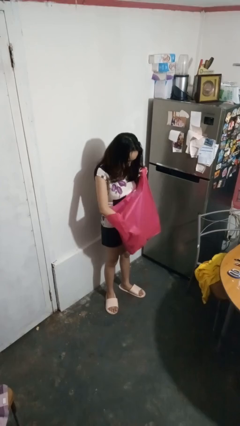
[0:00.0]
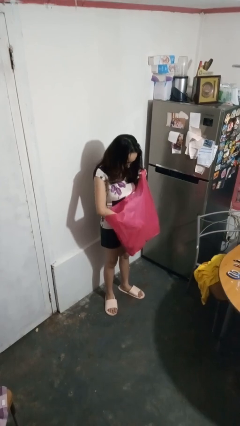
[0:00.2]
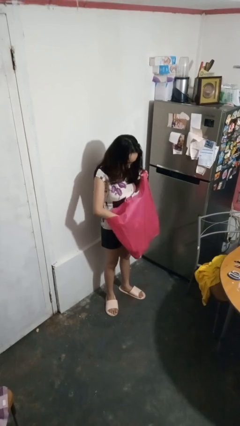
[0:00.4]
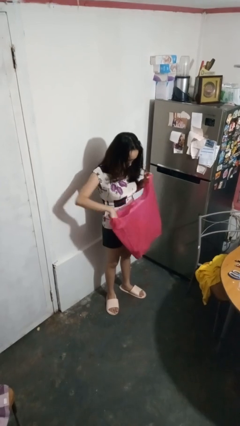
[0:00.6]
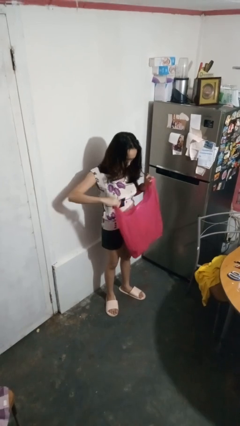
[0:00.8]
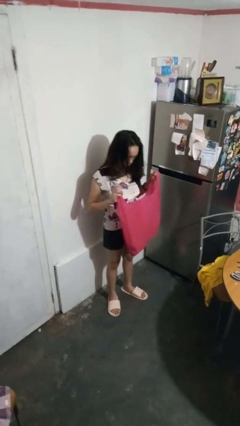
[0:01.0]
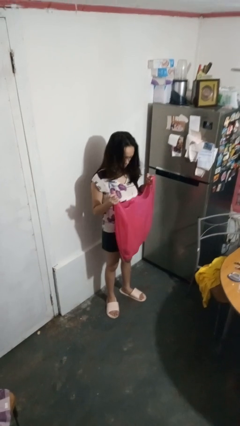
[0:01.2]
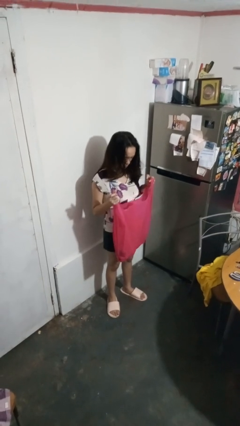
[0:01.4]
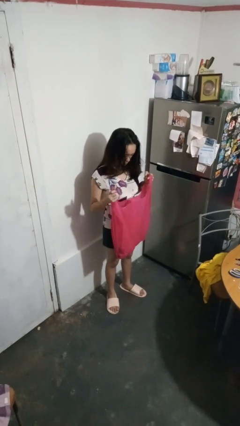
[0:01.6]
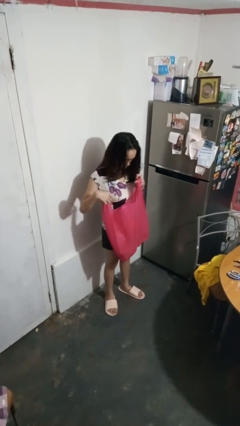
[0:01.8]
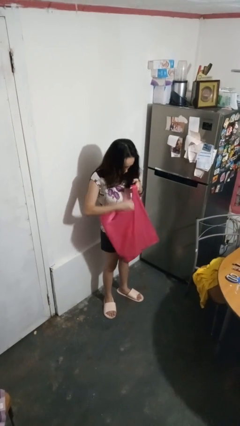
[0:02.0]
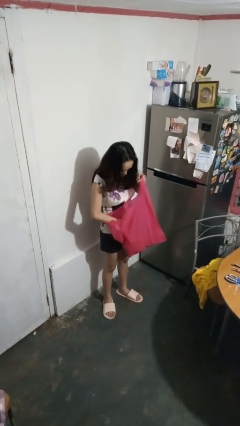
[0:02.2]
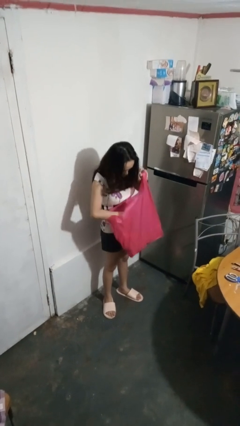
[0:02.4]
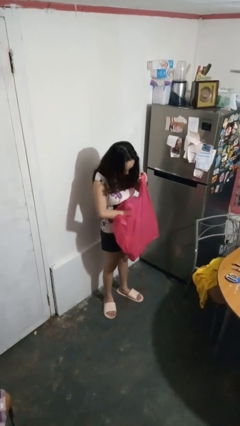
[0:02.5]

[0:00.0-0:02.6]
person searches in box

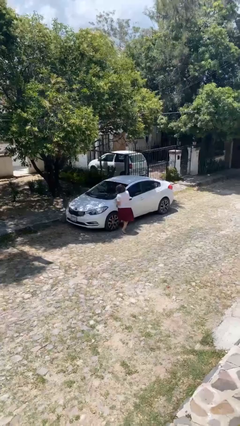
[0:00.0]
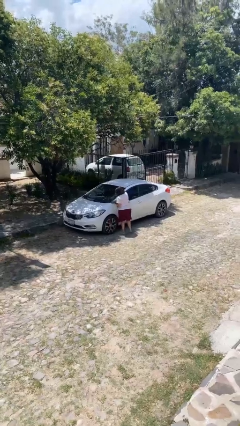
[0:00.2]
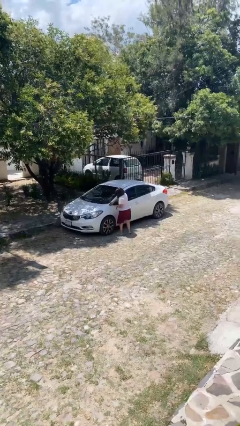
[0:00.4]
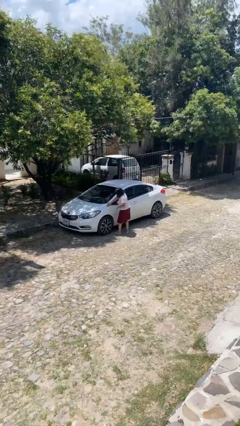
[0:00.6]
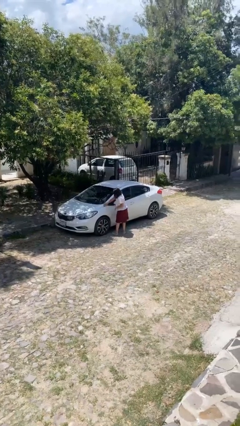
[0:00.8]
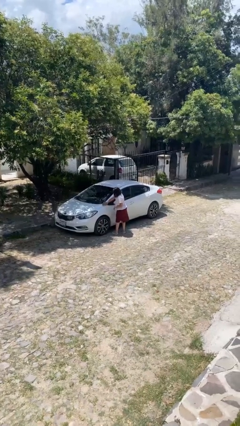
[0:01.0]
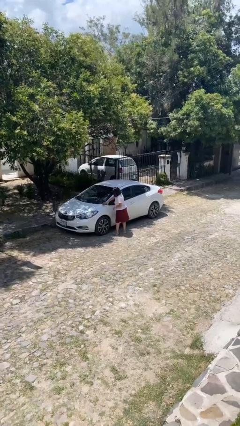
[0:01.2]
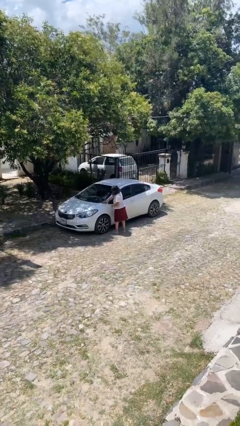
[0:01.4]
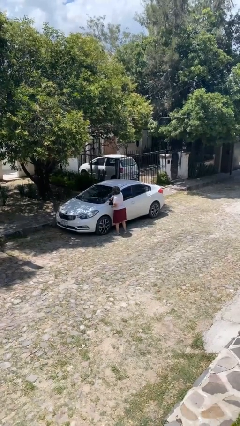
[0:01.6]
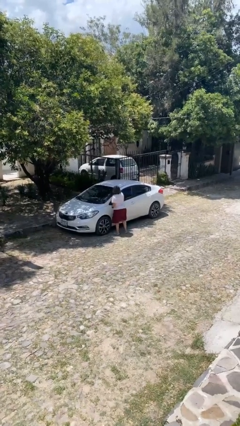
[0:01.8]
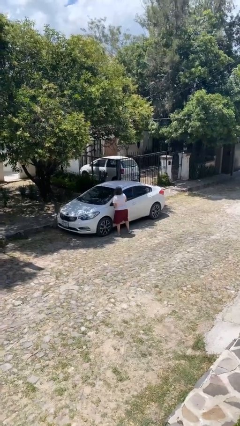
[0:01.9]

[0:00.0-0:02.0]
person polishes car with rag

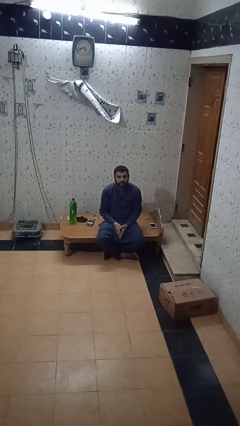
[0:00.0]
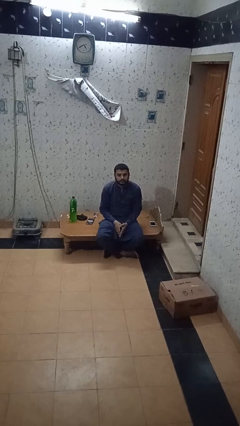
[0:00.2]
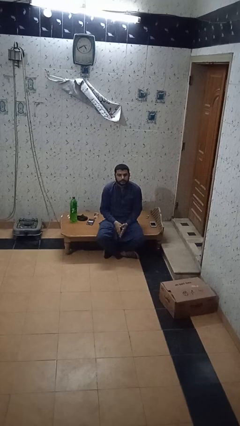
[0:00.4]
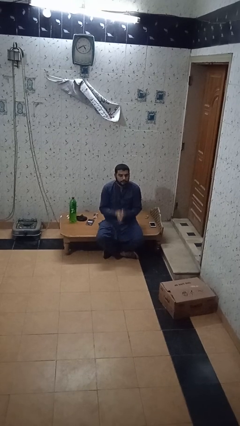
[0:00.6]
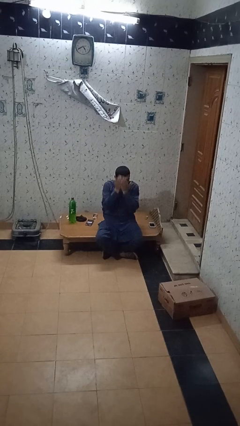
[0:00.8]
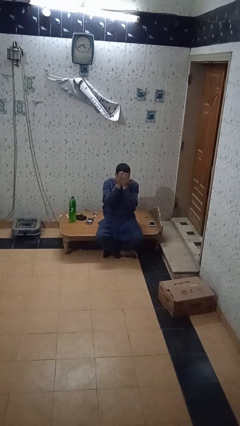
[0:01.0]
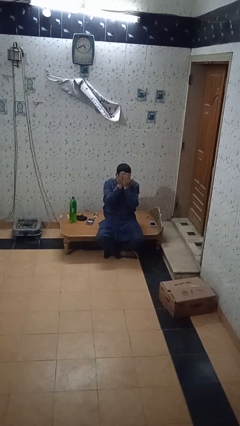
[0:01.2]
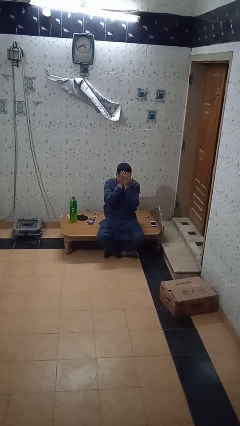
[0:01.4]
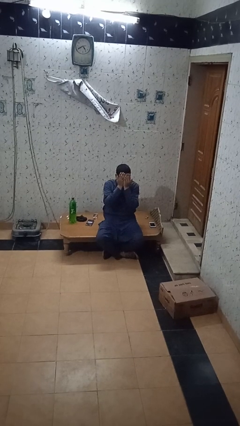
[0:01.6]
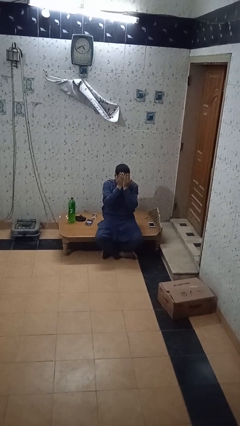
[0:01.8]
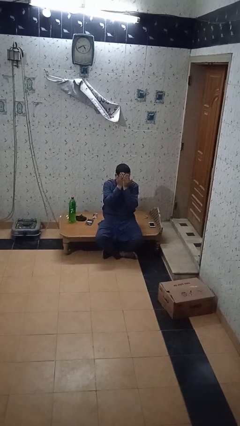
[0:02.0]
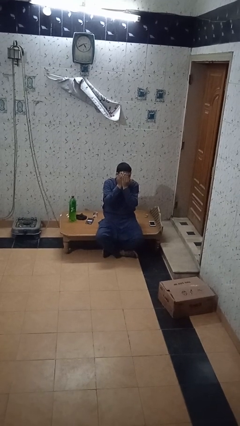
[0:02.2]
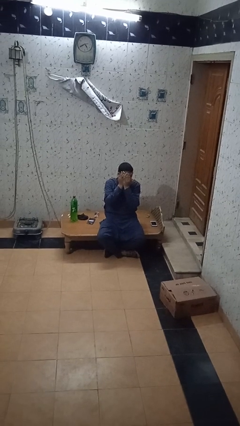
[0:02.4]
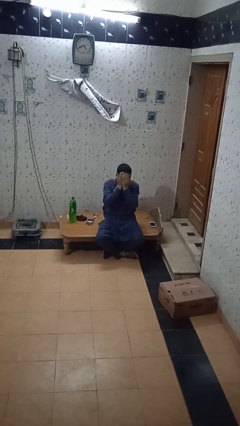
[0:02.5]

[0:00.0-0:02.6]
person covers face with hands

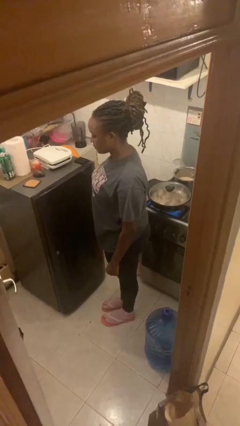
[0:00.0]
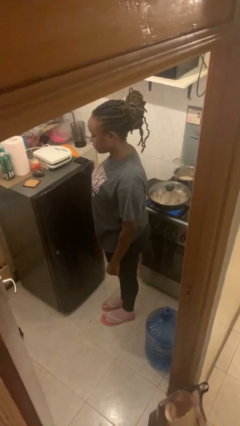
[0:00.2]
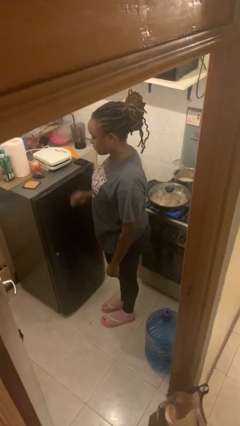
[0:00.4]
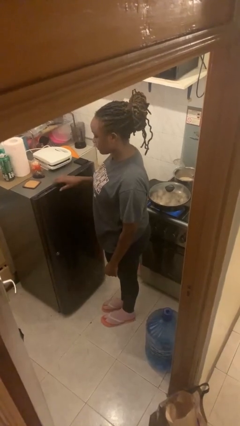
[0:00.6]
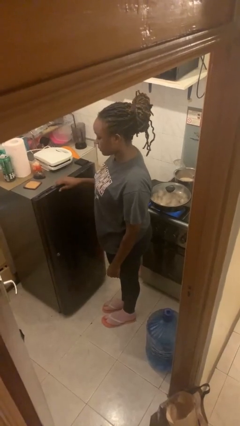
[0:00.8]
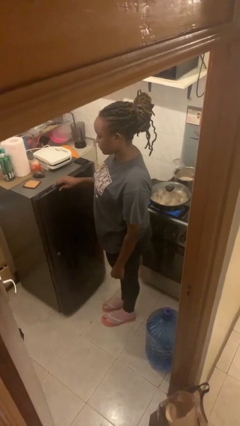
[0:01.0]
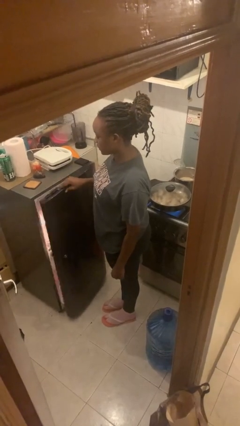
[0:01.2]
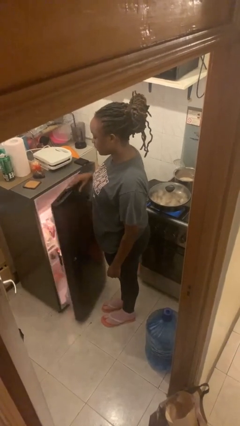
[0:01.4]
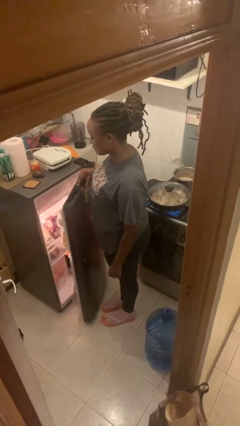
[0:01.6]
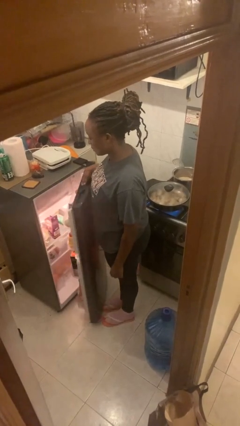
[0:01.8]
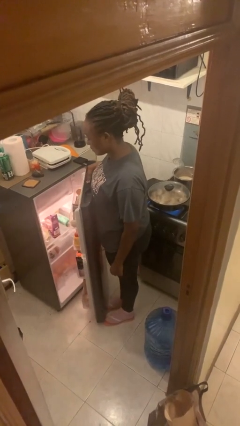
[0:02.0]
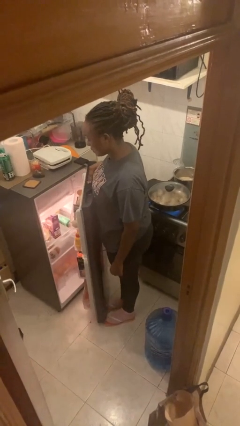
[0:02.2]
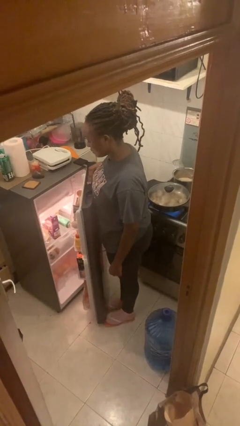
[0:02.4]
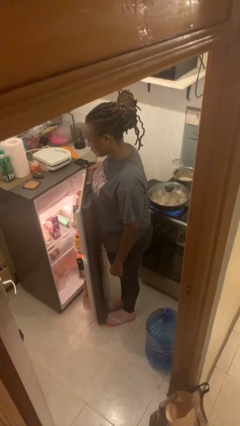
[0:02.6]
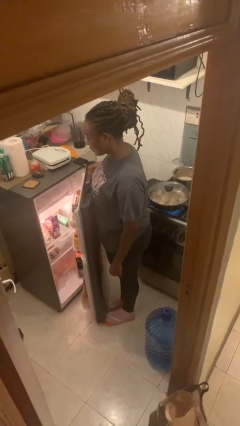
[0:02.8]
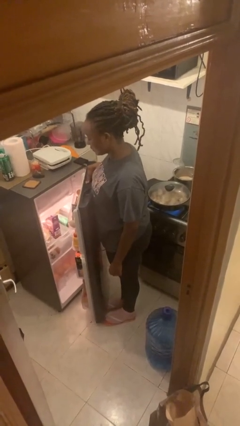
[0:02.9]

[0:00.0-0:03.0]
person opens refrigerator

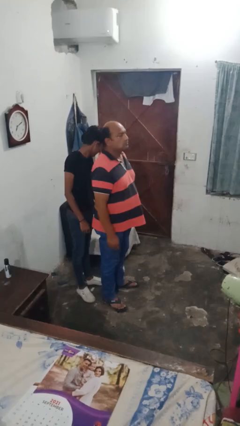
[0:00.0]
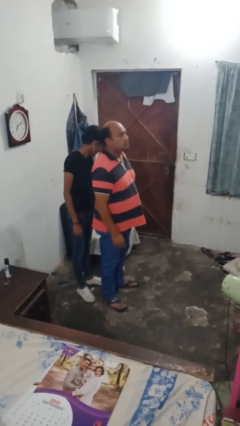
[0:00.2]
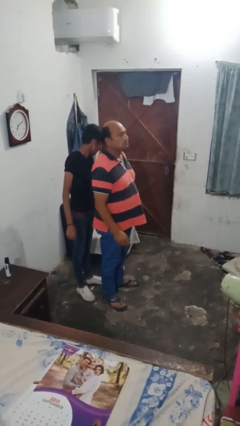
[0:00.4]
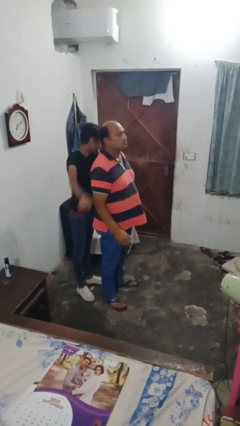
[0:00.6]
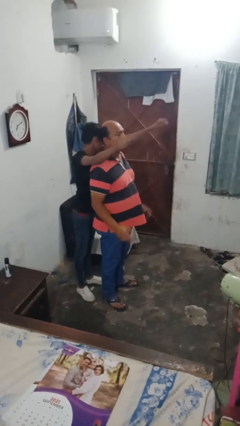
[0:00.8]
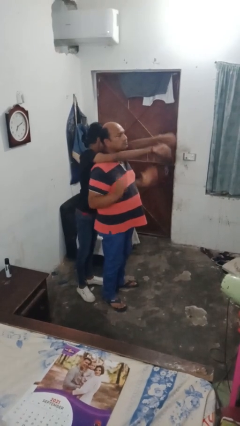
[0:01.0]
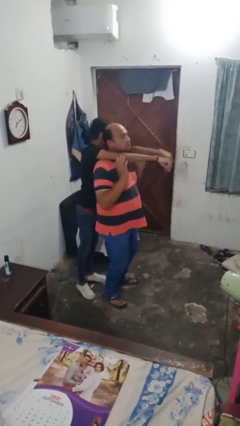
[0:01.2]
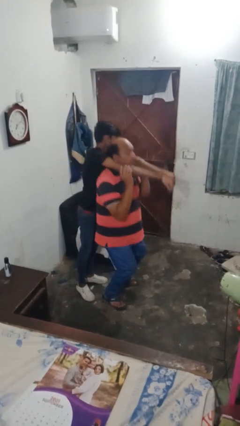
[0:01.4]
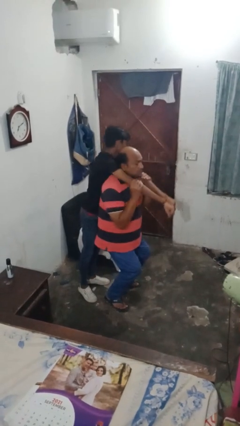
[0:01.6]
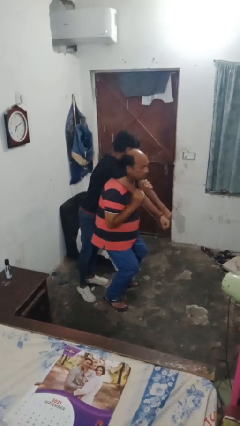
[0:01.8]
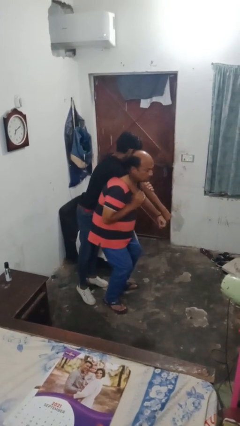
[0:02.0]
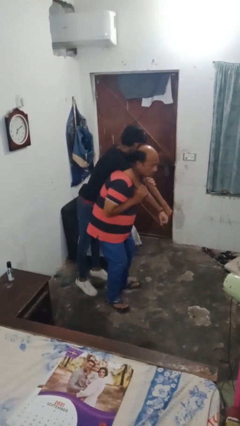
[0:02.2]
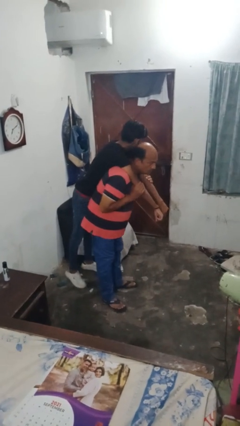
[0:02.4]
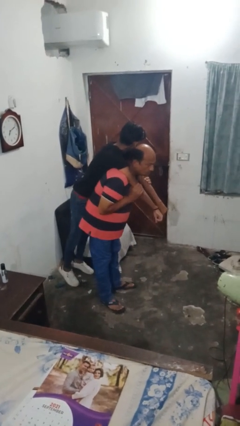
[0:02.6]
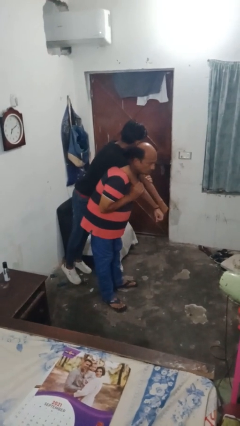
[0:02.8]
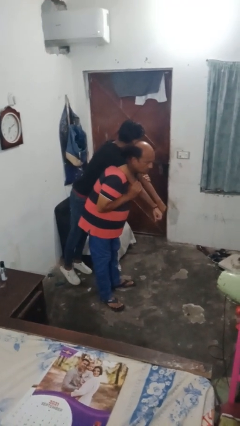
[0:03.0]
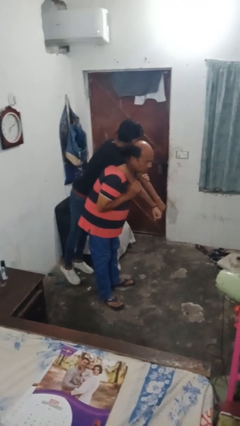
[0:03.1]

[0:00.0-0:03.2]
person carries person on shoulders

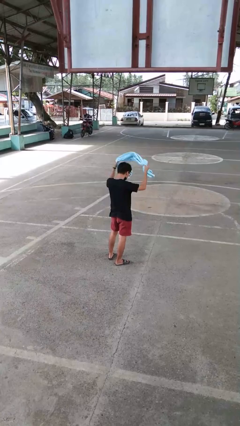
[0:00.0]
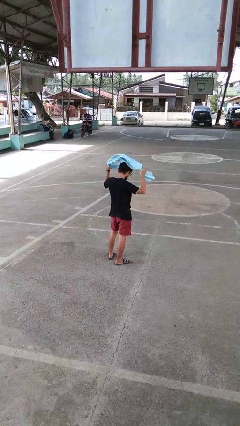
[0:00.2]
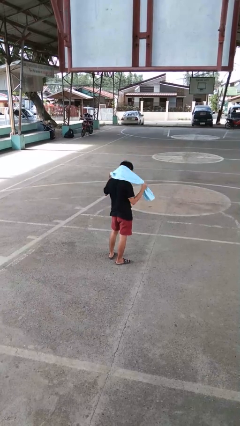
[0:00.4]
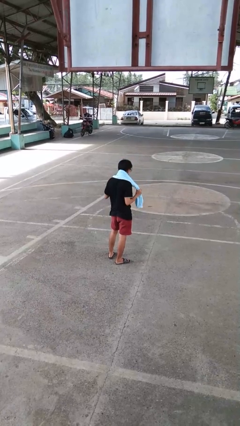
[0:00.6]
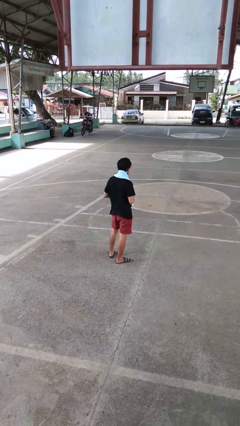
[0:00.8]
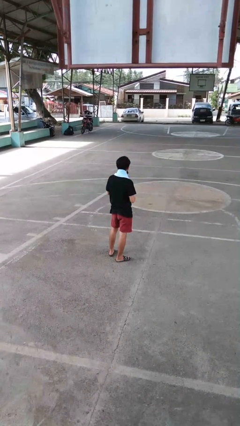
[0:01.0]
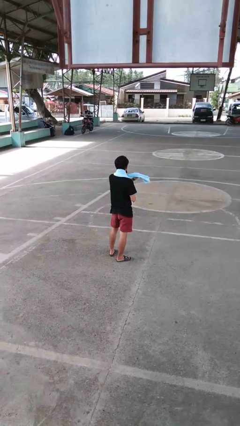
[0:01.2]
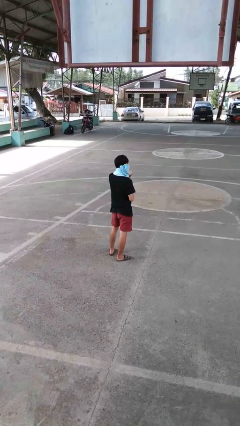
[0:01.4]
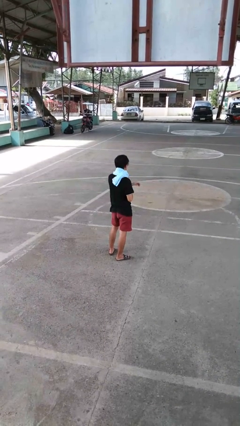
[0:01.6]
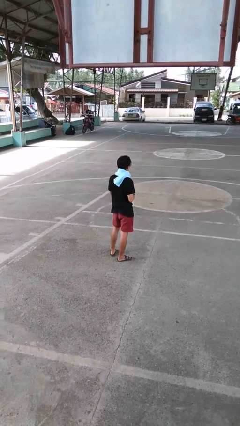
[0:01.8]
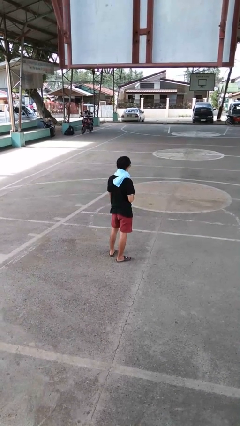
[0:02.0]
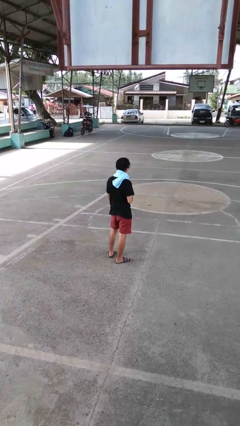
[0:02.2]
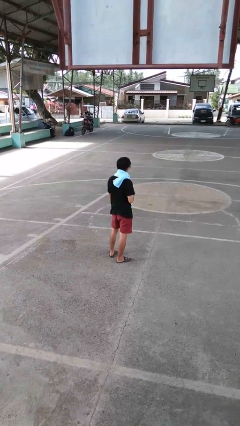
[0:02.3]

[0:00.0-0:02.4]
person puts on scarf

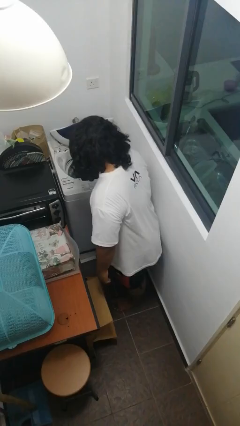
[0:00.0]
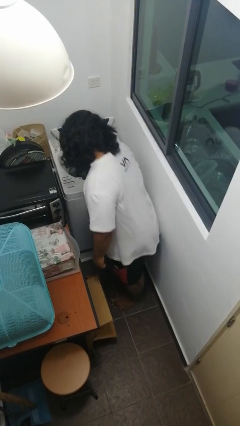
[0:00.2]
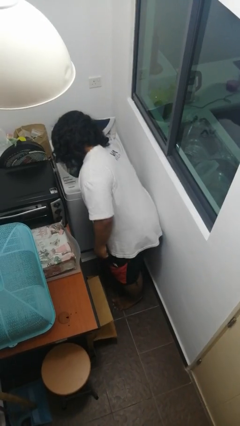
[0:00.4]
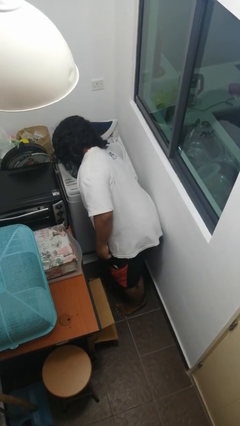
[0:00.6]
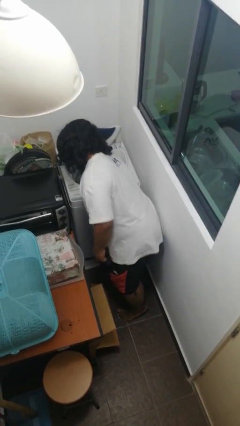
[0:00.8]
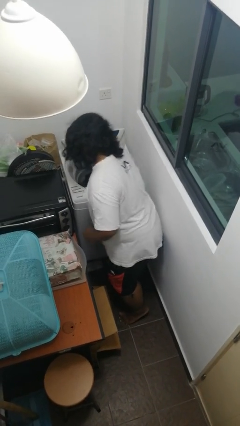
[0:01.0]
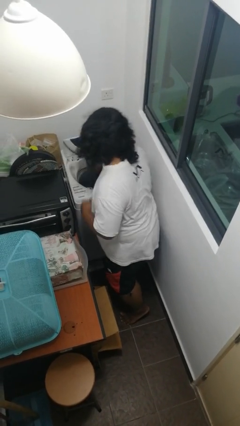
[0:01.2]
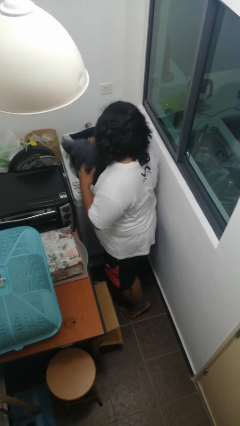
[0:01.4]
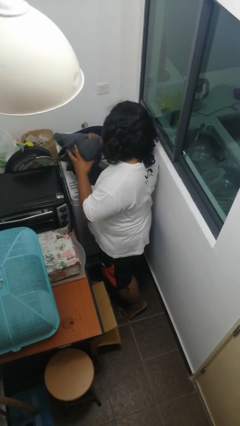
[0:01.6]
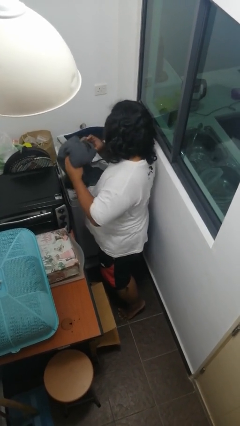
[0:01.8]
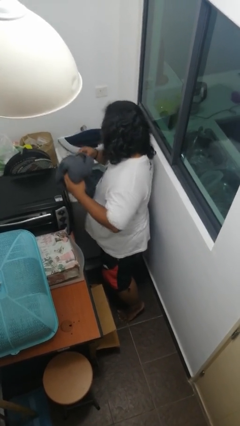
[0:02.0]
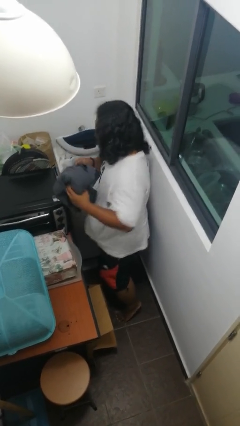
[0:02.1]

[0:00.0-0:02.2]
person unloads clotheswasher
